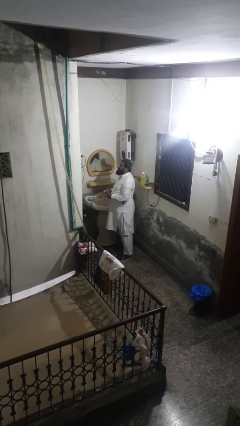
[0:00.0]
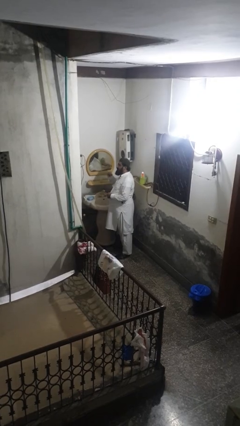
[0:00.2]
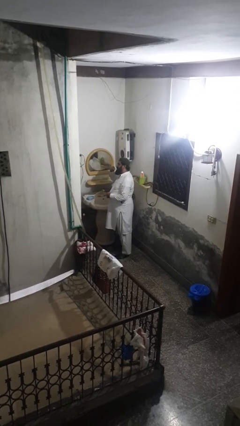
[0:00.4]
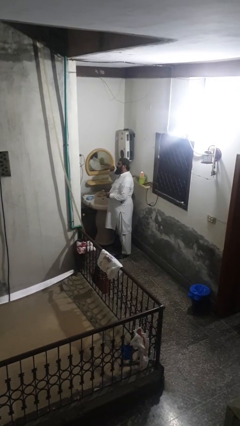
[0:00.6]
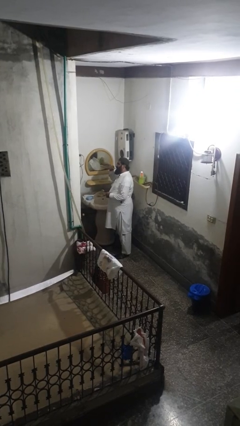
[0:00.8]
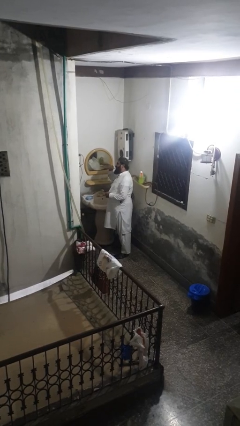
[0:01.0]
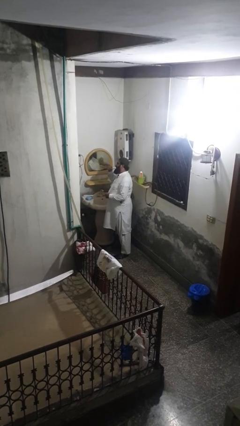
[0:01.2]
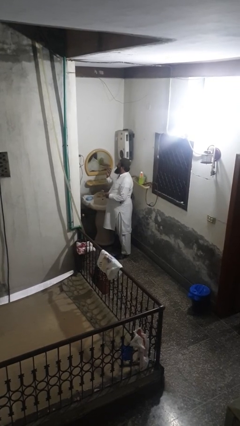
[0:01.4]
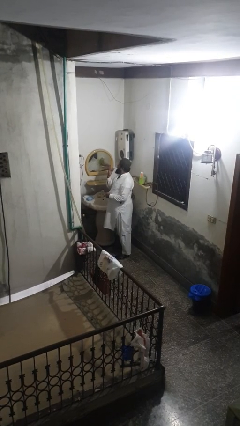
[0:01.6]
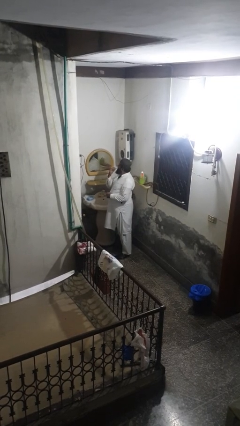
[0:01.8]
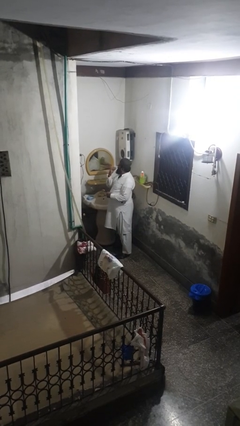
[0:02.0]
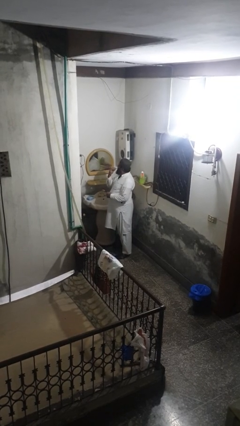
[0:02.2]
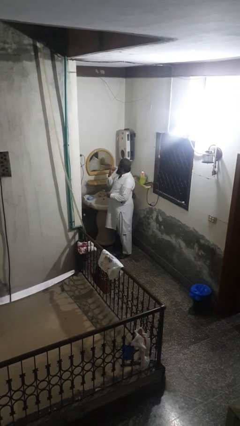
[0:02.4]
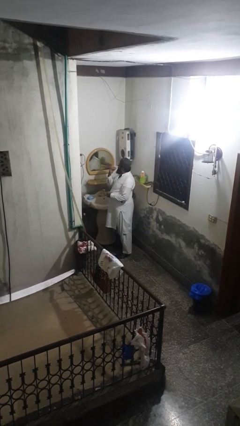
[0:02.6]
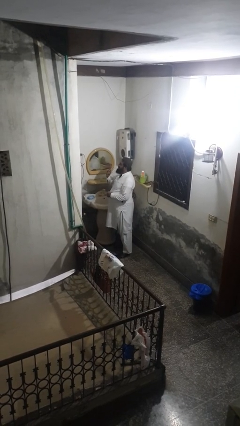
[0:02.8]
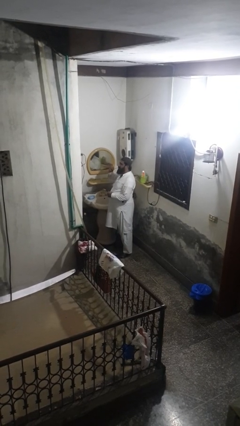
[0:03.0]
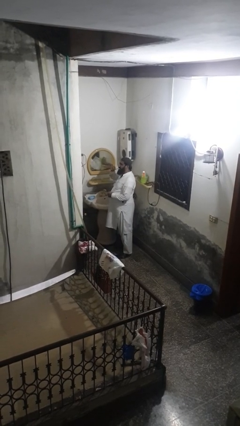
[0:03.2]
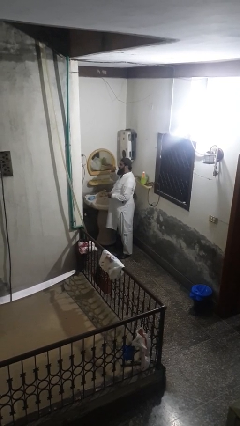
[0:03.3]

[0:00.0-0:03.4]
person brushes teeth

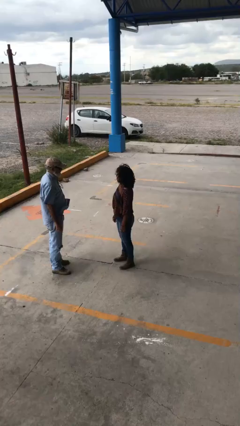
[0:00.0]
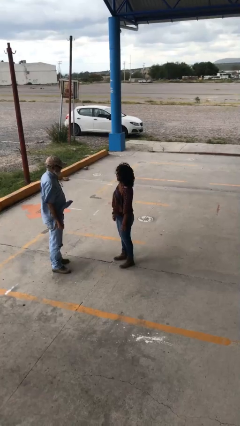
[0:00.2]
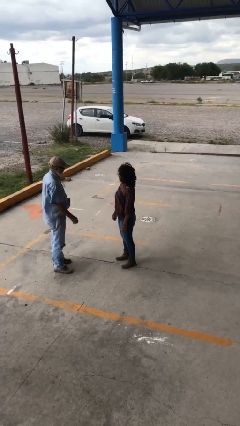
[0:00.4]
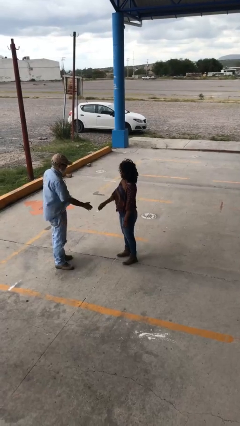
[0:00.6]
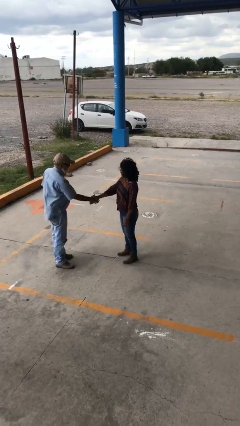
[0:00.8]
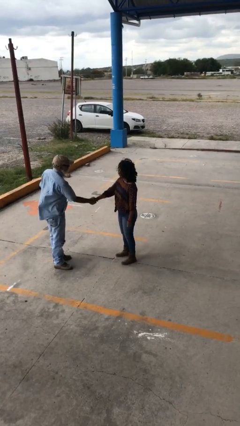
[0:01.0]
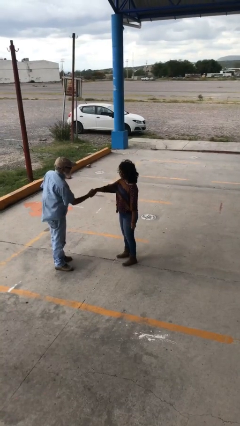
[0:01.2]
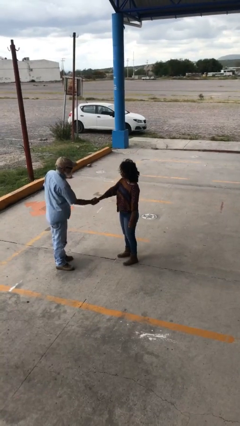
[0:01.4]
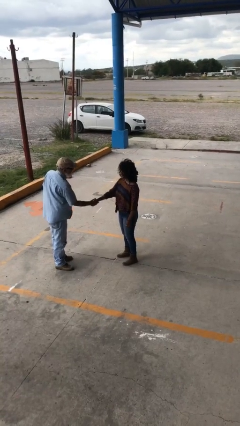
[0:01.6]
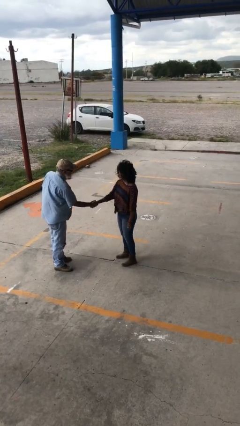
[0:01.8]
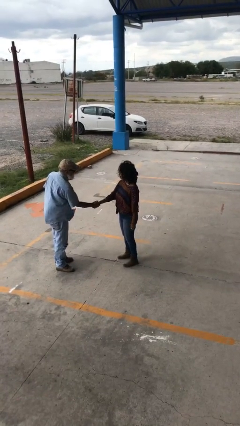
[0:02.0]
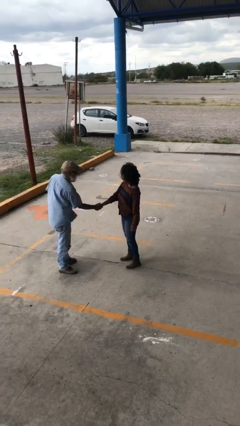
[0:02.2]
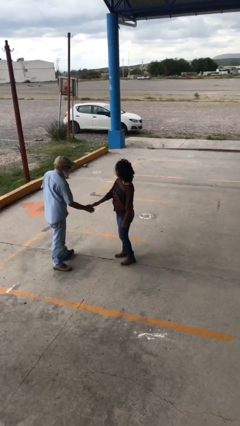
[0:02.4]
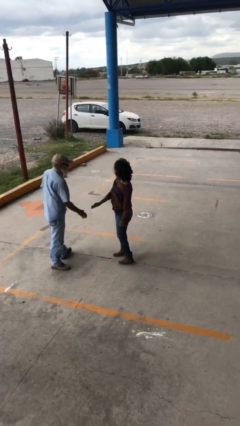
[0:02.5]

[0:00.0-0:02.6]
person shakes hand

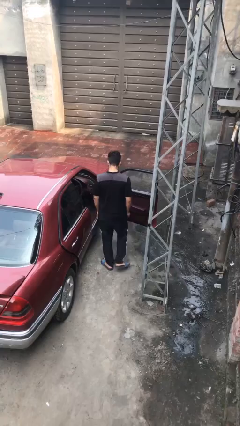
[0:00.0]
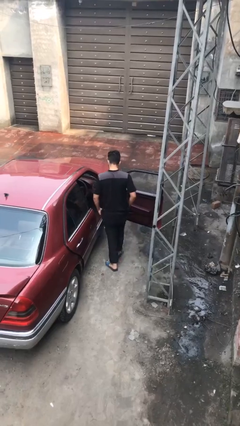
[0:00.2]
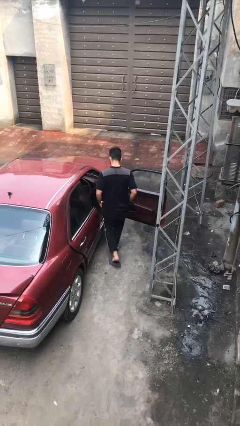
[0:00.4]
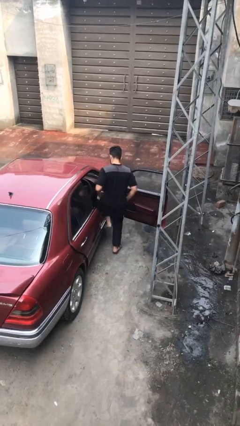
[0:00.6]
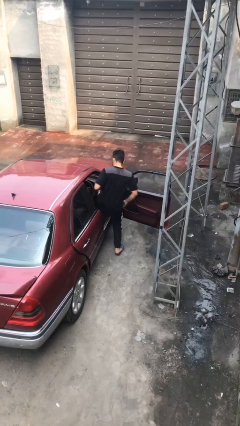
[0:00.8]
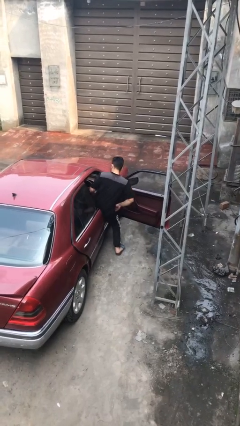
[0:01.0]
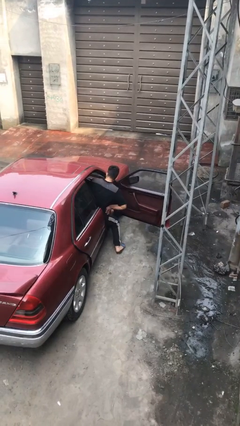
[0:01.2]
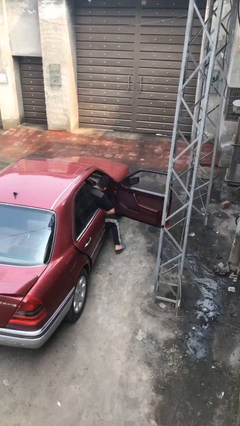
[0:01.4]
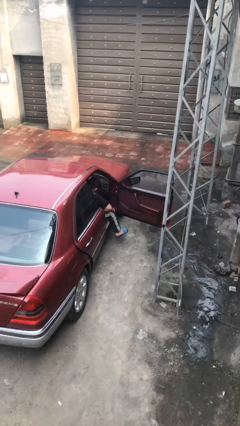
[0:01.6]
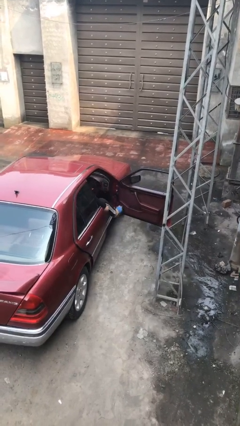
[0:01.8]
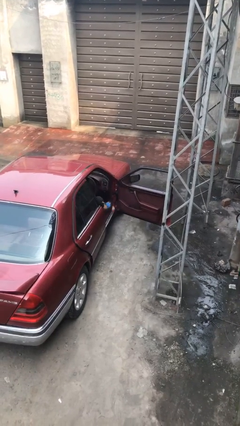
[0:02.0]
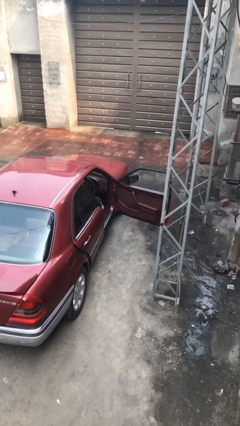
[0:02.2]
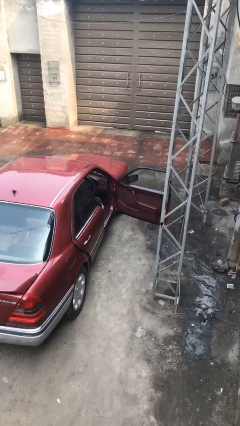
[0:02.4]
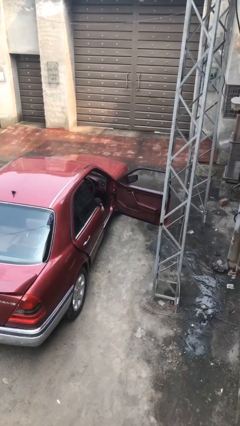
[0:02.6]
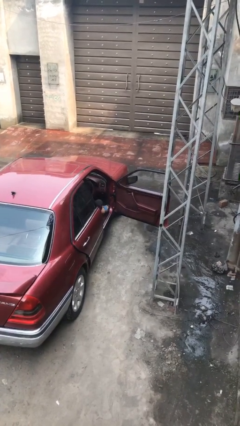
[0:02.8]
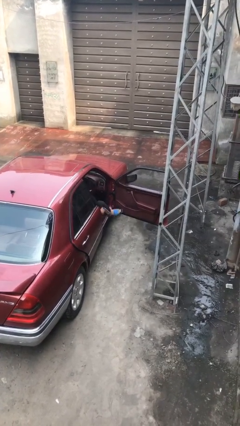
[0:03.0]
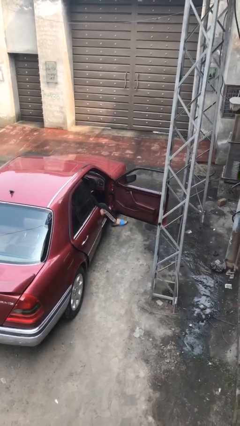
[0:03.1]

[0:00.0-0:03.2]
person enters car

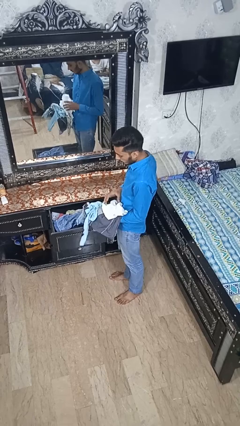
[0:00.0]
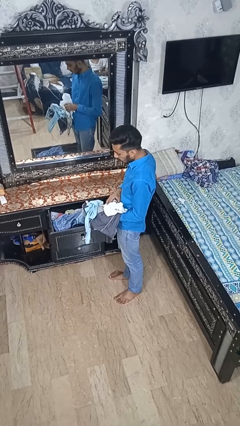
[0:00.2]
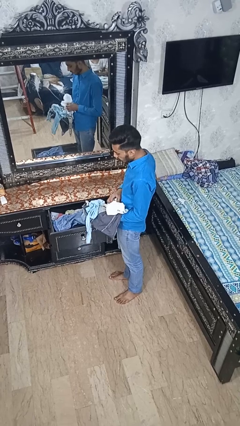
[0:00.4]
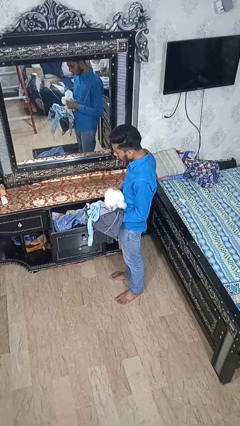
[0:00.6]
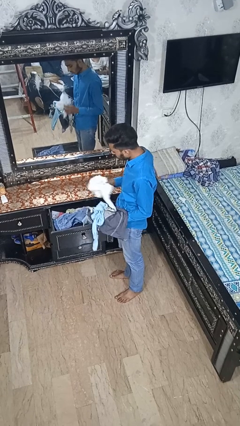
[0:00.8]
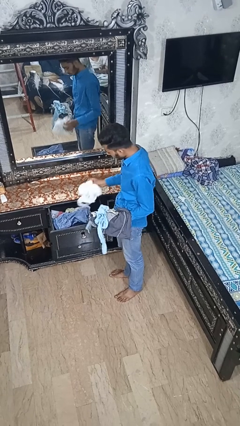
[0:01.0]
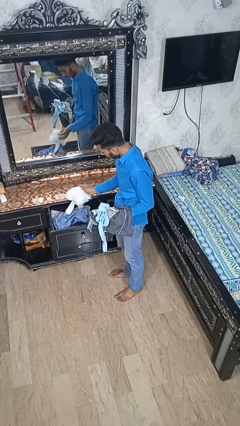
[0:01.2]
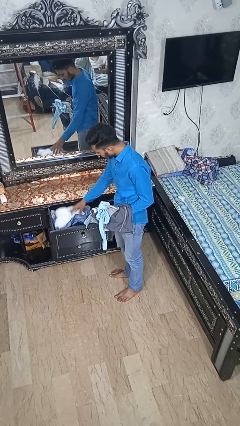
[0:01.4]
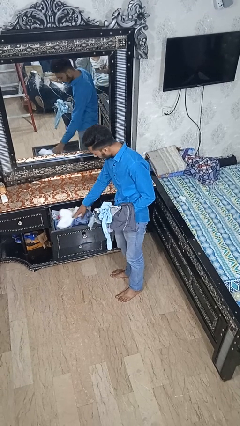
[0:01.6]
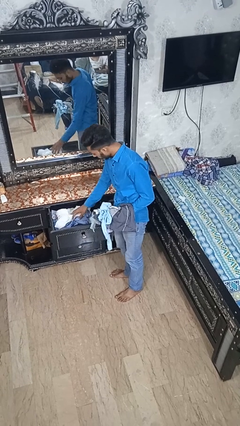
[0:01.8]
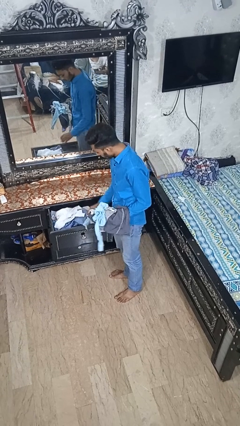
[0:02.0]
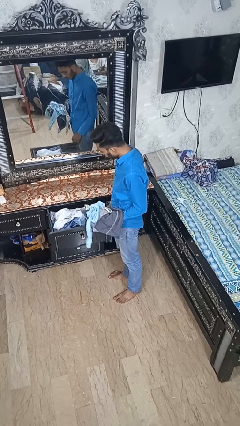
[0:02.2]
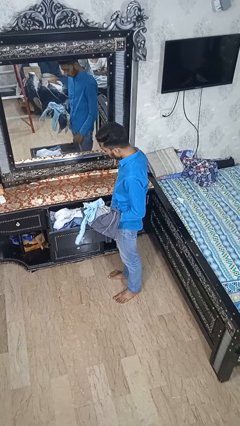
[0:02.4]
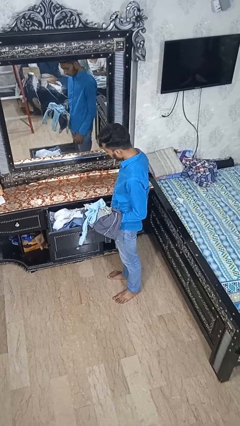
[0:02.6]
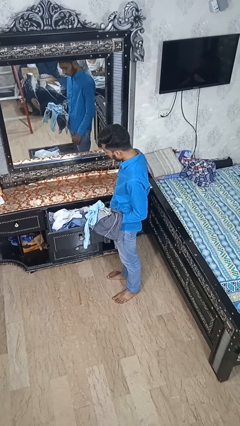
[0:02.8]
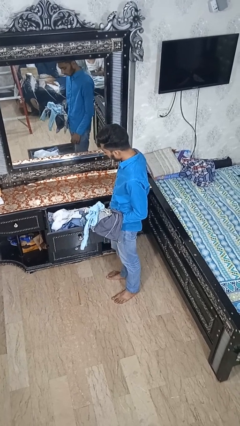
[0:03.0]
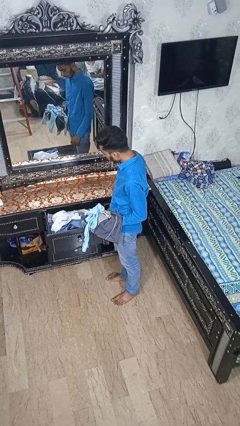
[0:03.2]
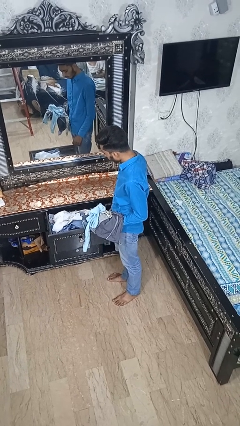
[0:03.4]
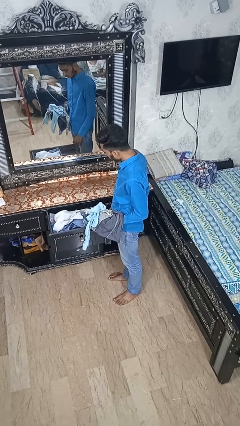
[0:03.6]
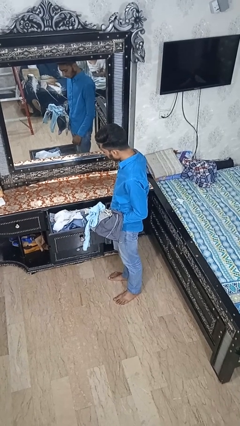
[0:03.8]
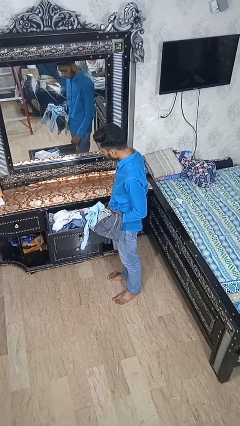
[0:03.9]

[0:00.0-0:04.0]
person puts clothes into dresser

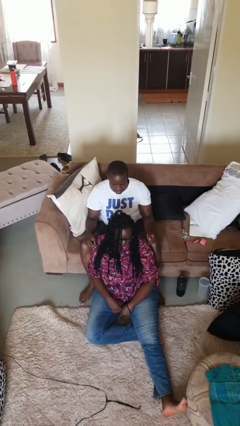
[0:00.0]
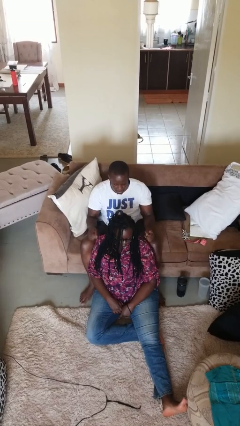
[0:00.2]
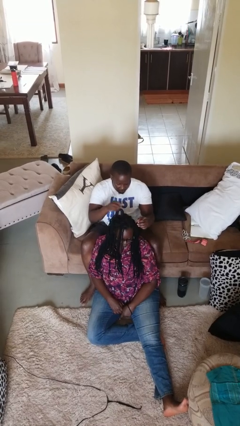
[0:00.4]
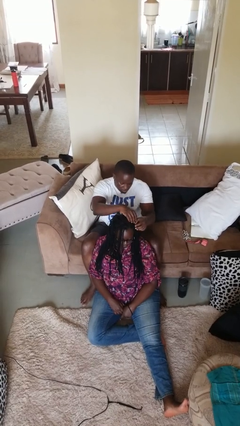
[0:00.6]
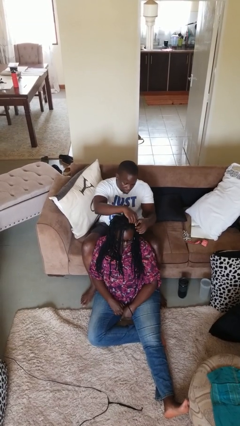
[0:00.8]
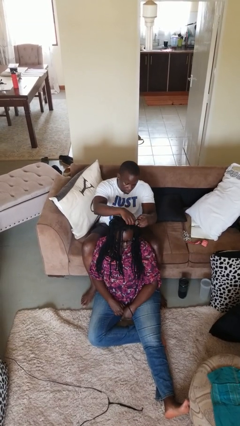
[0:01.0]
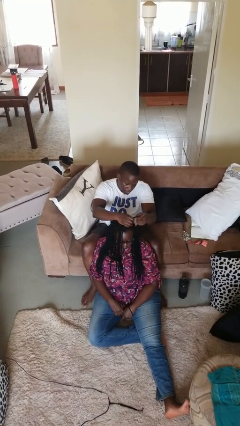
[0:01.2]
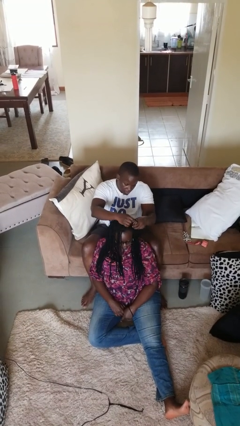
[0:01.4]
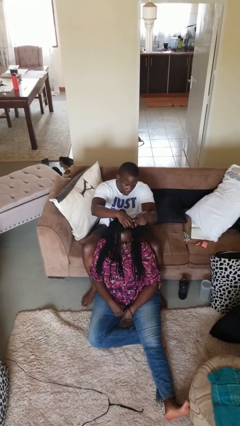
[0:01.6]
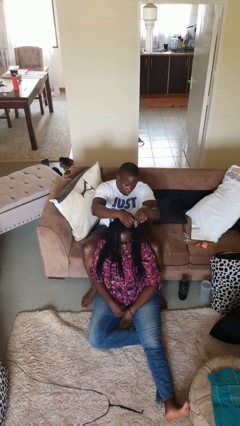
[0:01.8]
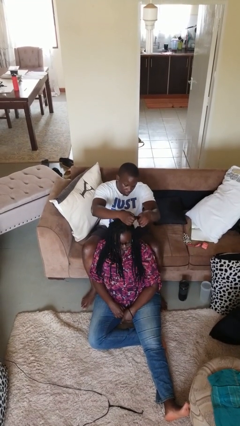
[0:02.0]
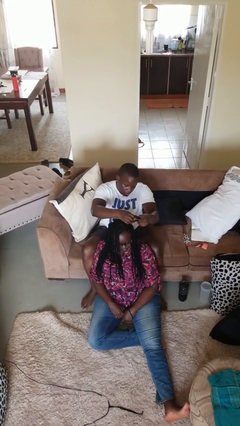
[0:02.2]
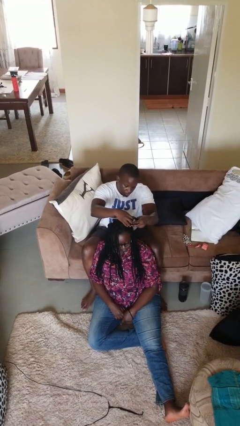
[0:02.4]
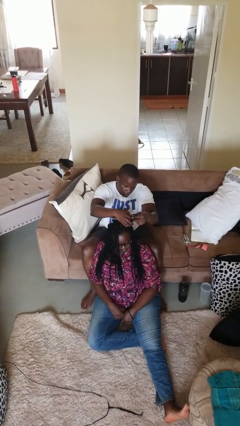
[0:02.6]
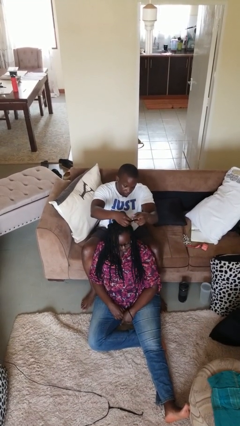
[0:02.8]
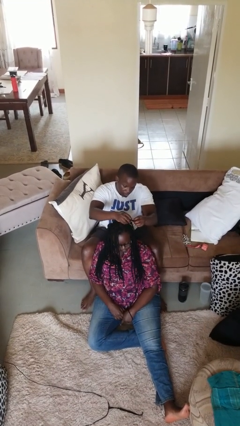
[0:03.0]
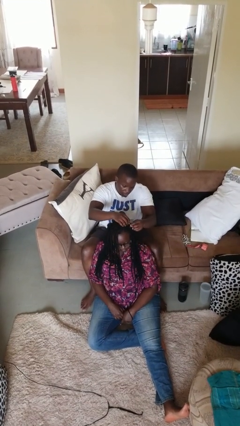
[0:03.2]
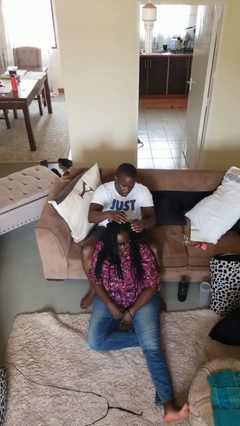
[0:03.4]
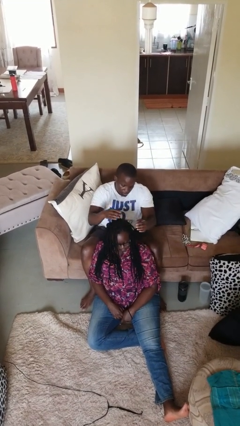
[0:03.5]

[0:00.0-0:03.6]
person braids hair of person

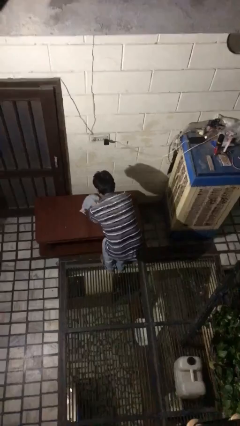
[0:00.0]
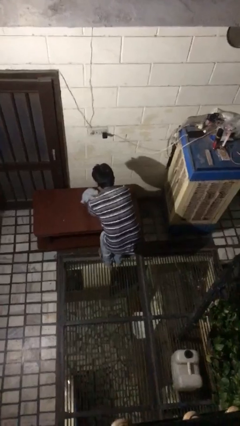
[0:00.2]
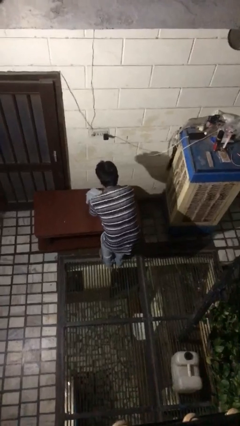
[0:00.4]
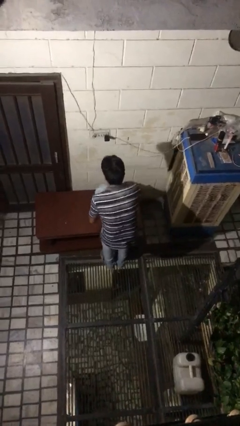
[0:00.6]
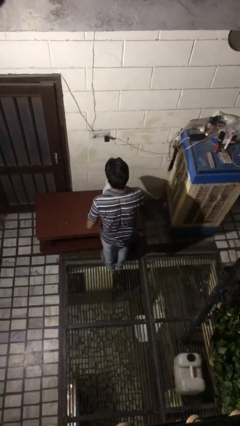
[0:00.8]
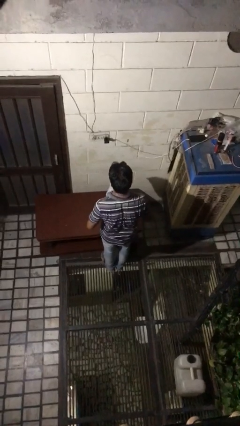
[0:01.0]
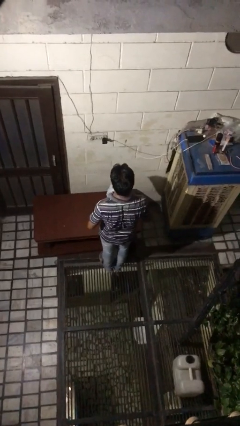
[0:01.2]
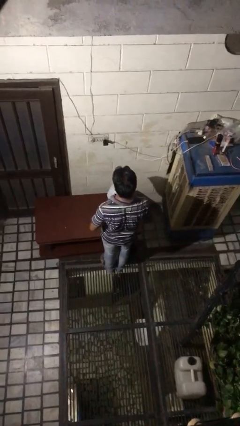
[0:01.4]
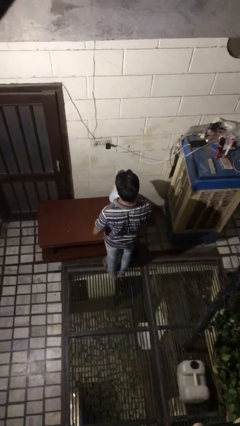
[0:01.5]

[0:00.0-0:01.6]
person picks up object from table
